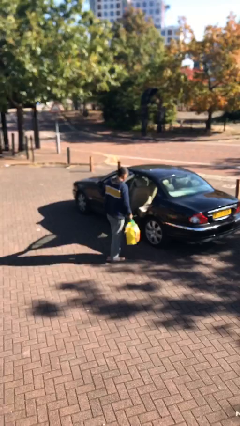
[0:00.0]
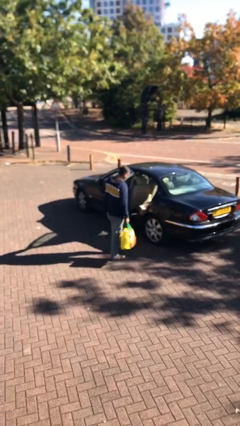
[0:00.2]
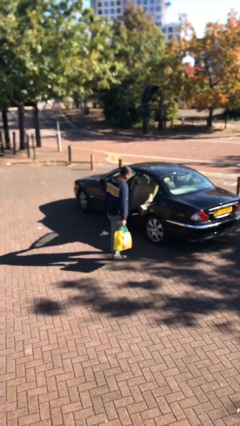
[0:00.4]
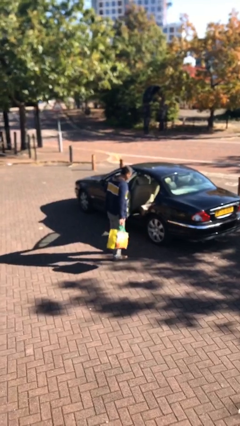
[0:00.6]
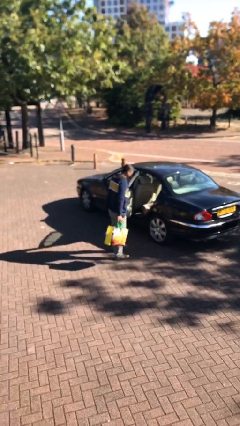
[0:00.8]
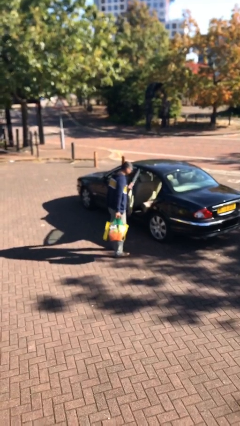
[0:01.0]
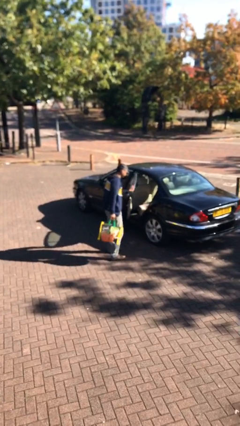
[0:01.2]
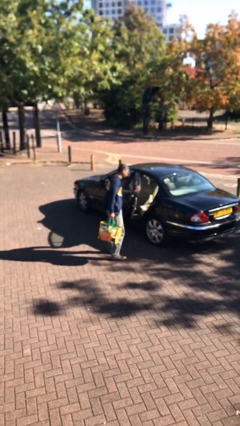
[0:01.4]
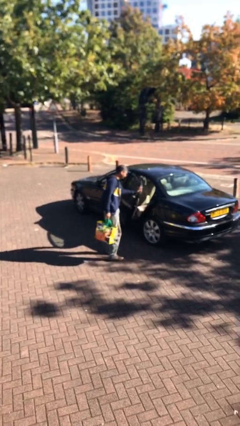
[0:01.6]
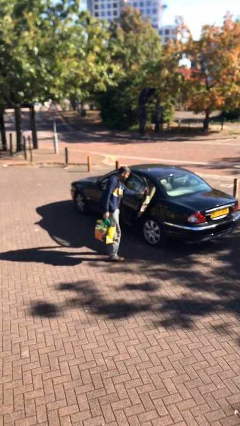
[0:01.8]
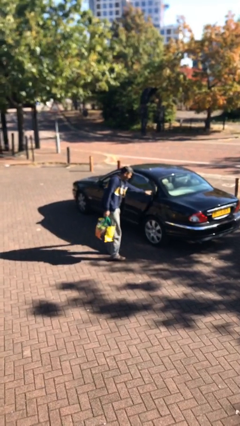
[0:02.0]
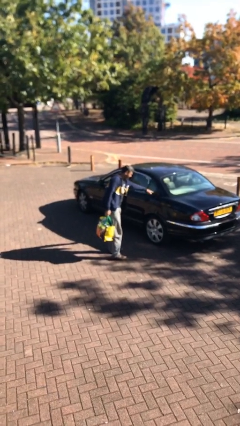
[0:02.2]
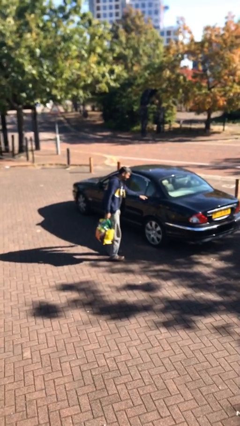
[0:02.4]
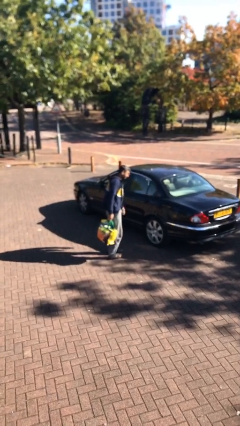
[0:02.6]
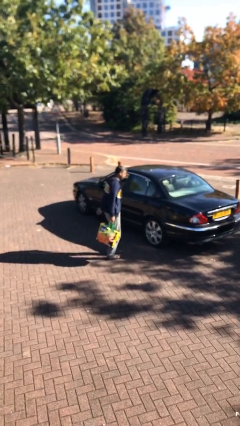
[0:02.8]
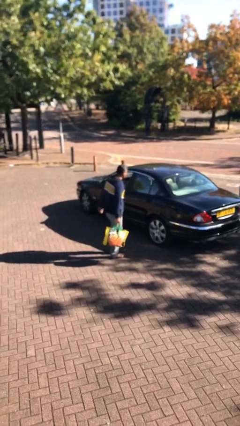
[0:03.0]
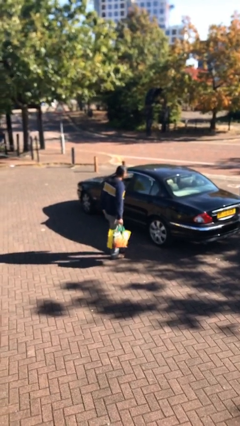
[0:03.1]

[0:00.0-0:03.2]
person closes car door

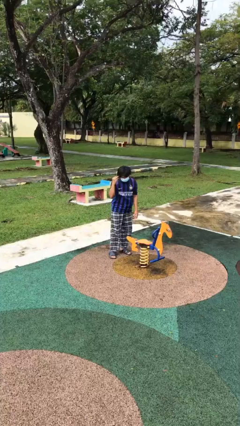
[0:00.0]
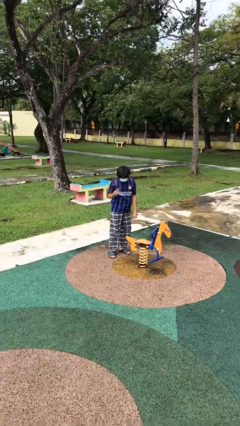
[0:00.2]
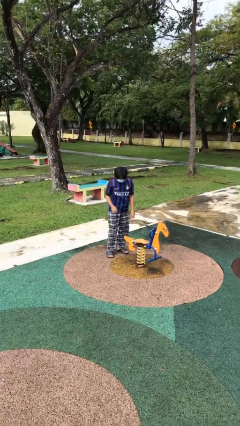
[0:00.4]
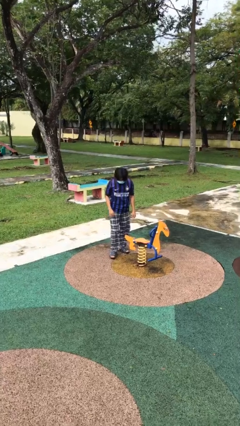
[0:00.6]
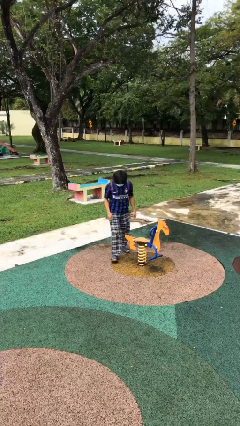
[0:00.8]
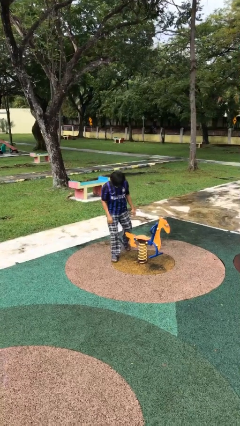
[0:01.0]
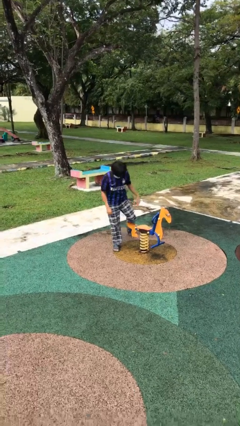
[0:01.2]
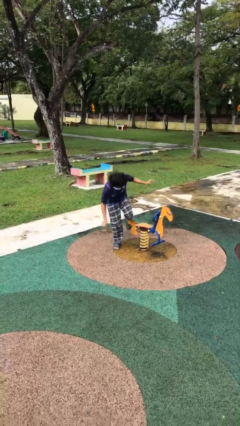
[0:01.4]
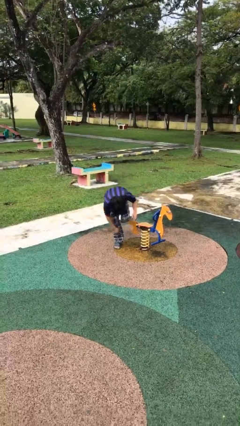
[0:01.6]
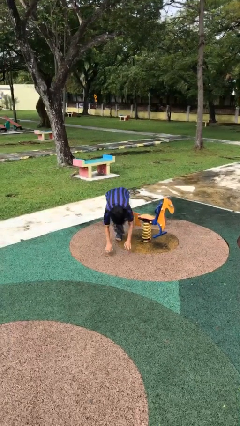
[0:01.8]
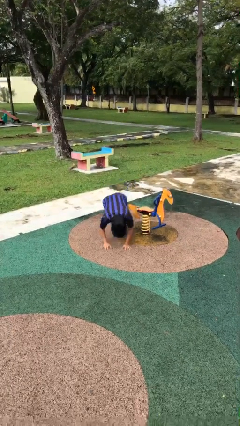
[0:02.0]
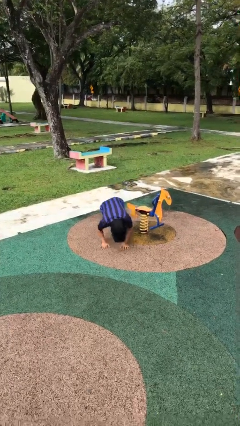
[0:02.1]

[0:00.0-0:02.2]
person trips on object on floor

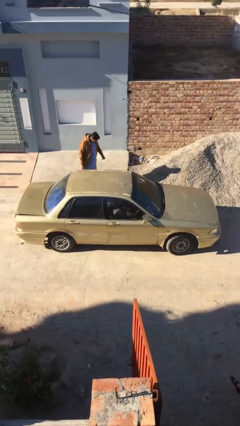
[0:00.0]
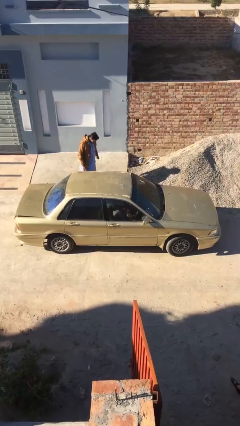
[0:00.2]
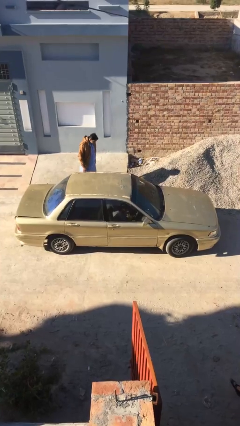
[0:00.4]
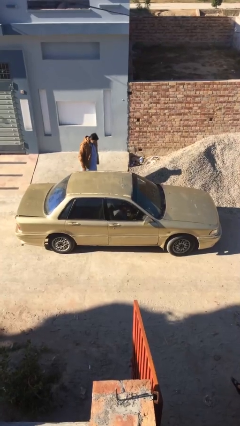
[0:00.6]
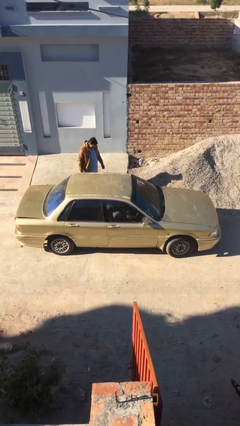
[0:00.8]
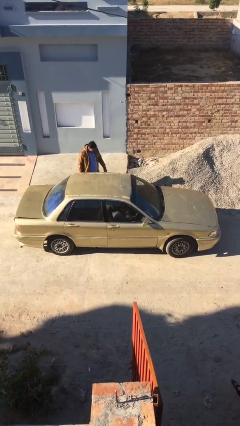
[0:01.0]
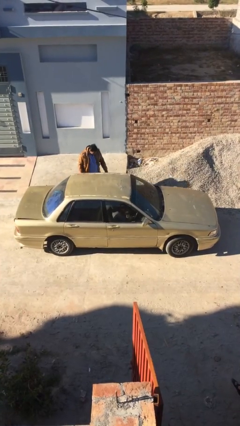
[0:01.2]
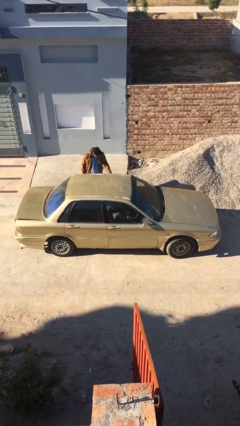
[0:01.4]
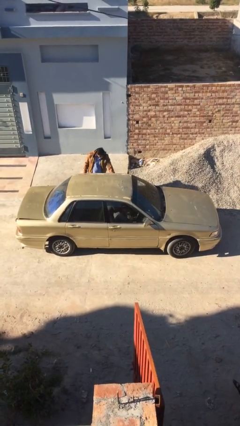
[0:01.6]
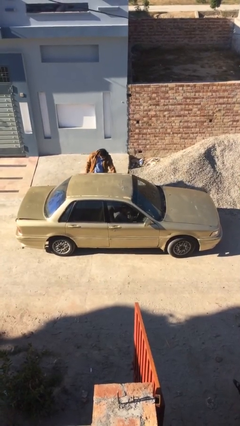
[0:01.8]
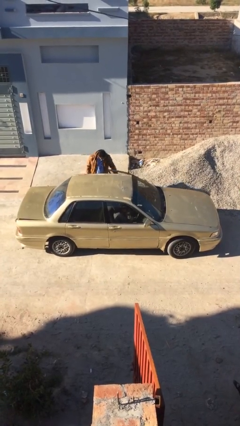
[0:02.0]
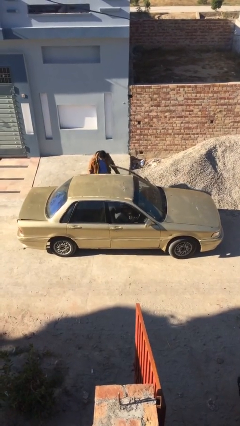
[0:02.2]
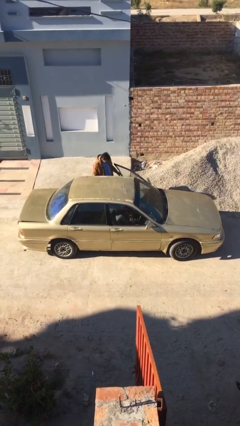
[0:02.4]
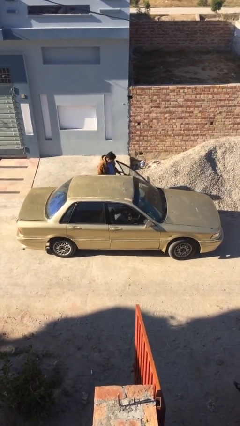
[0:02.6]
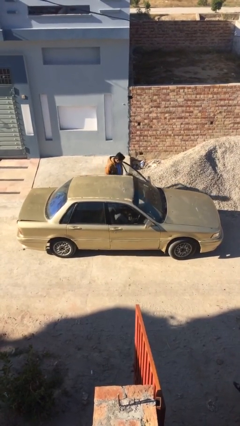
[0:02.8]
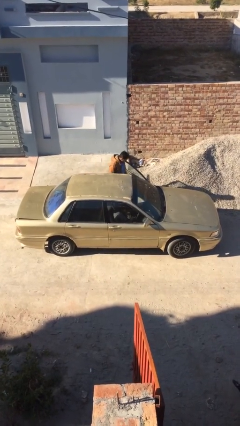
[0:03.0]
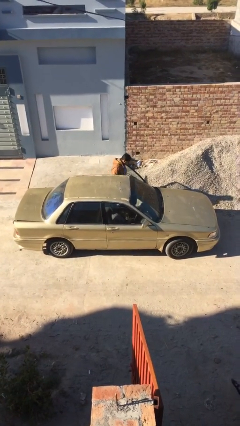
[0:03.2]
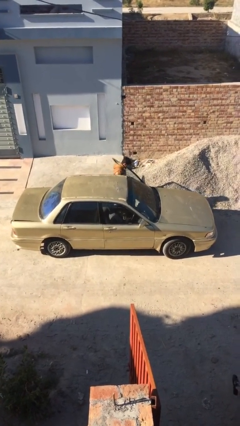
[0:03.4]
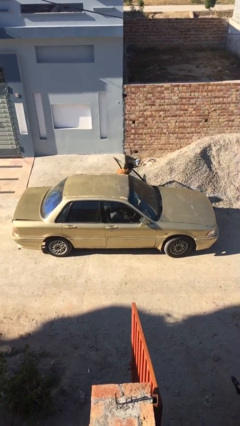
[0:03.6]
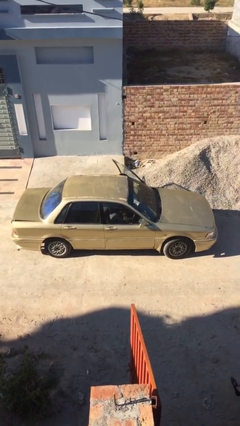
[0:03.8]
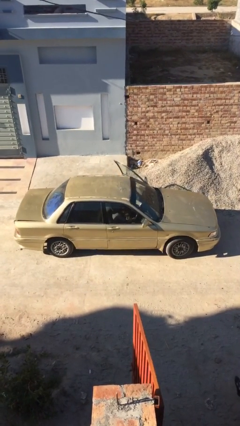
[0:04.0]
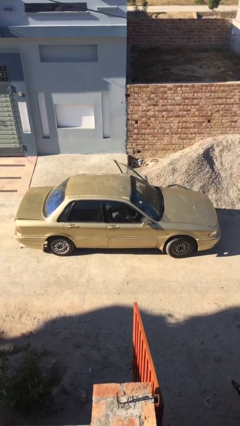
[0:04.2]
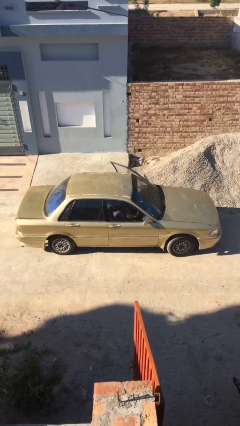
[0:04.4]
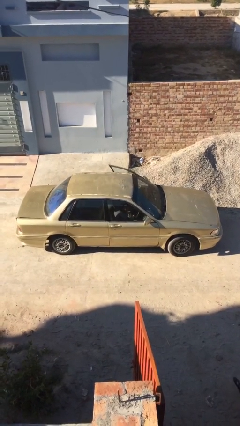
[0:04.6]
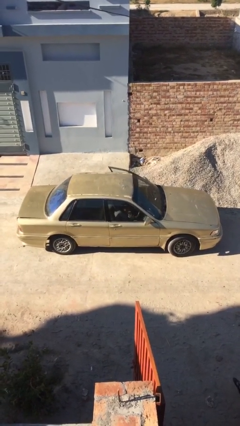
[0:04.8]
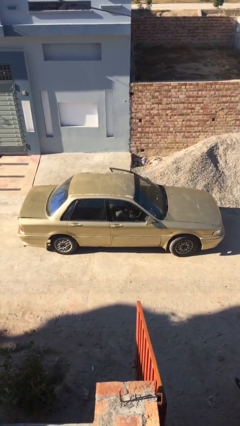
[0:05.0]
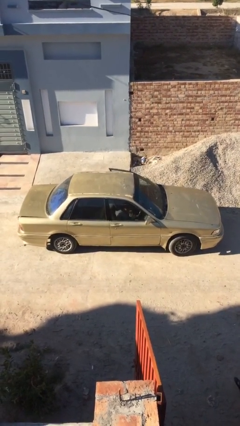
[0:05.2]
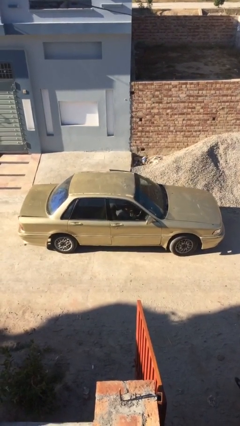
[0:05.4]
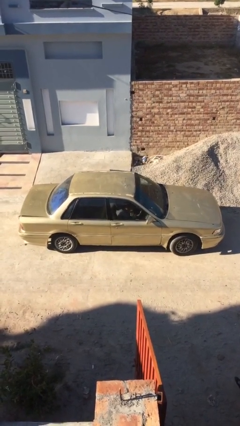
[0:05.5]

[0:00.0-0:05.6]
car picks up person

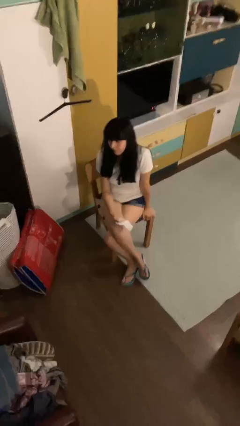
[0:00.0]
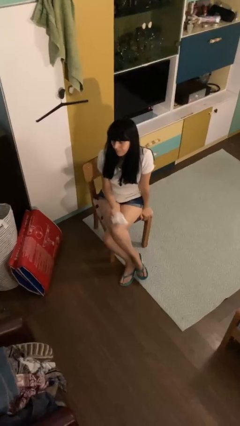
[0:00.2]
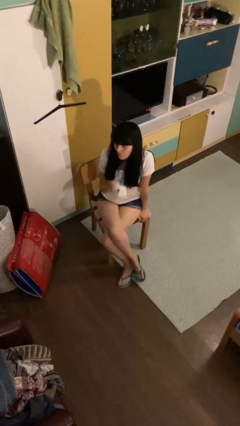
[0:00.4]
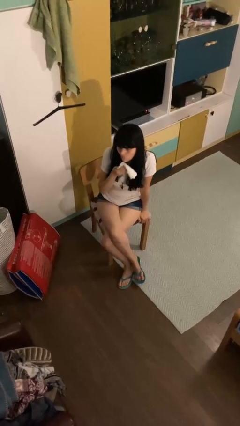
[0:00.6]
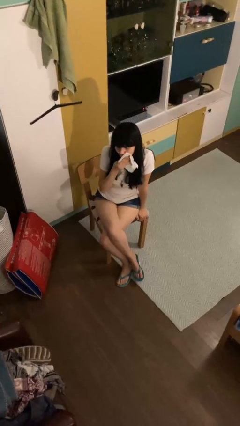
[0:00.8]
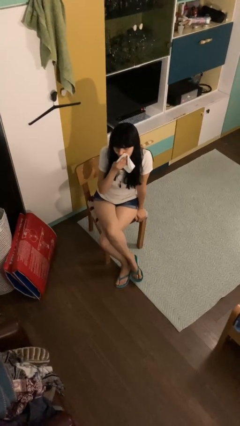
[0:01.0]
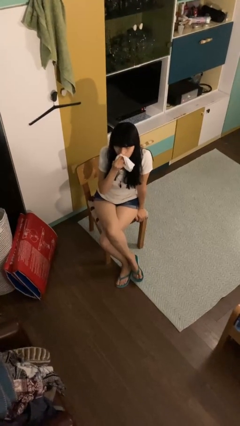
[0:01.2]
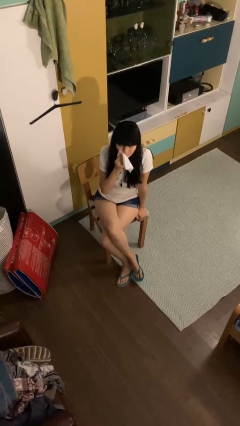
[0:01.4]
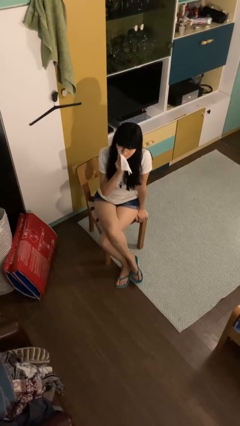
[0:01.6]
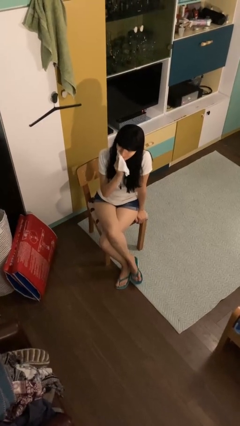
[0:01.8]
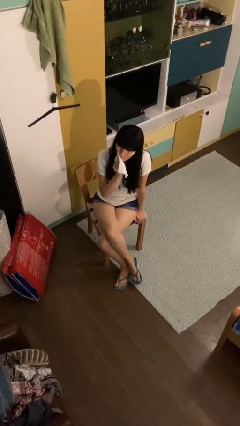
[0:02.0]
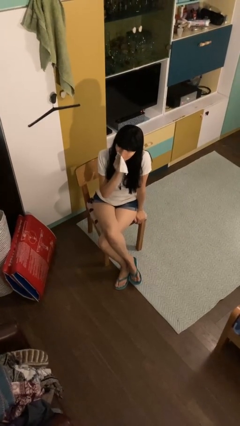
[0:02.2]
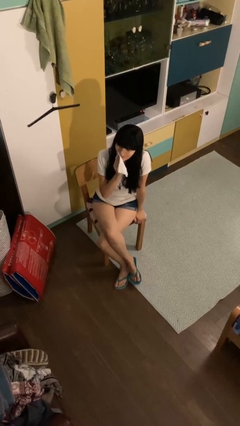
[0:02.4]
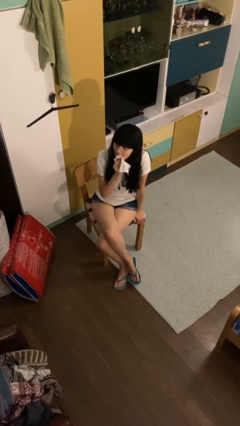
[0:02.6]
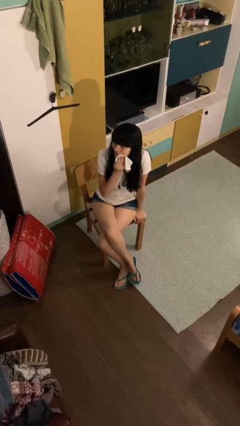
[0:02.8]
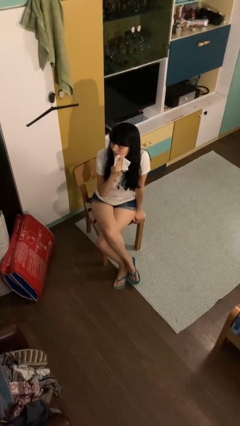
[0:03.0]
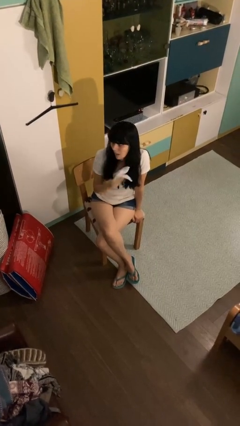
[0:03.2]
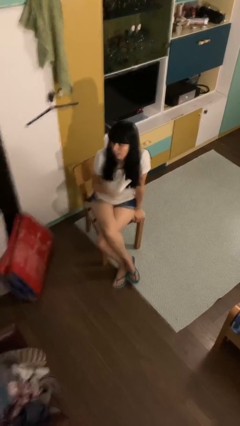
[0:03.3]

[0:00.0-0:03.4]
person wipes mouth with napkin

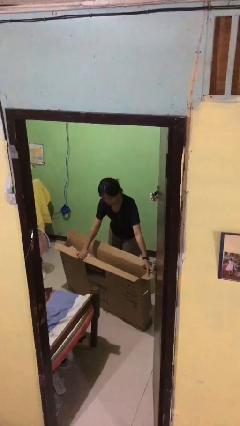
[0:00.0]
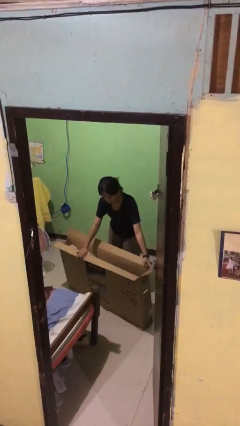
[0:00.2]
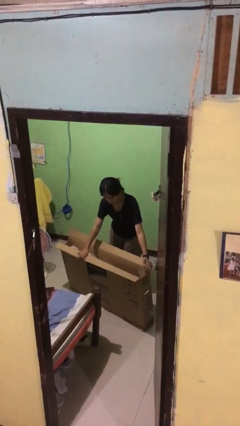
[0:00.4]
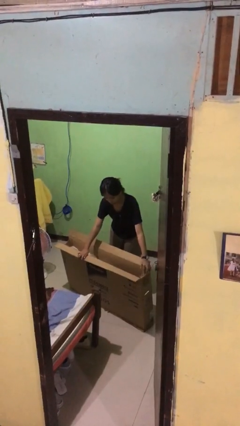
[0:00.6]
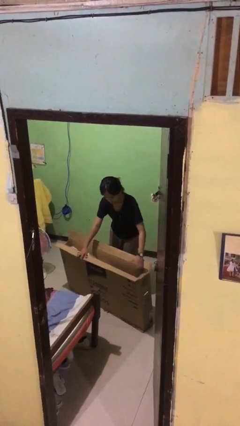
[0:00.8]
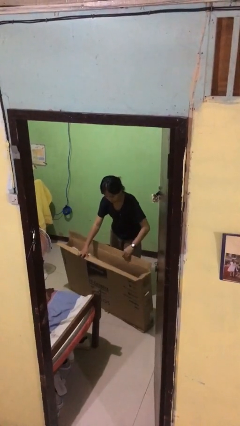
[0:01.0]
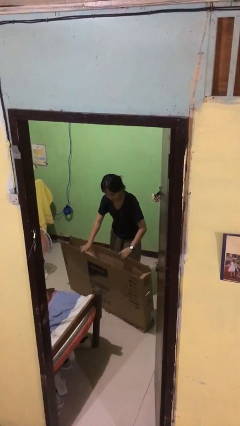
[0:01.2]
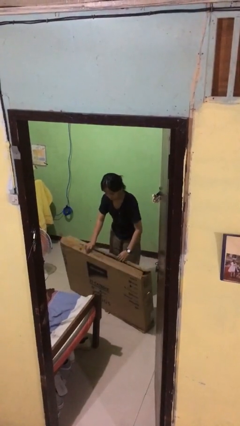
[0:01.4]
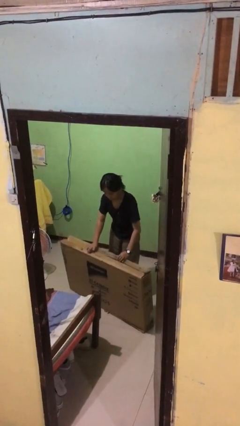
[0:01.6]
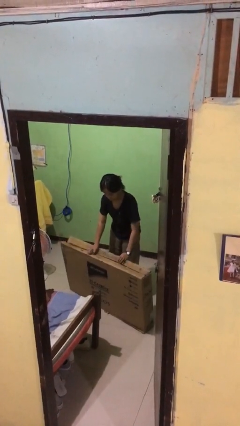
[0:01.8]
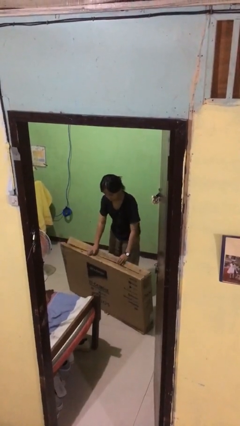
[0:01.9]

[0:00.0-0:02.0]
person closes box

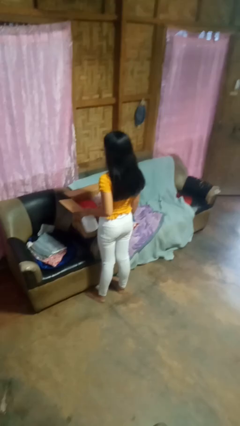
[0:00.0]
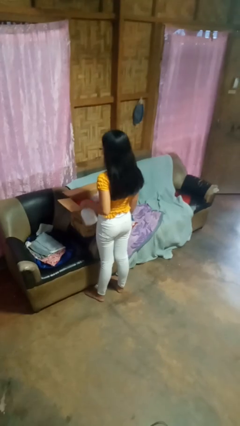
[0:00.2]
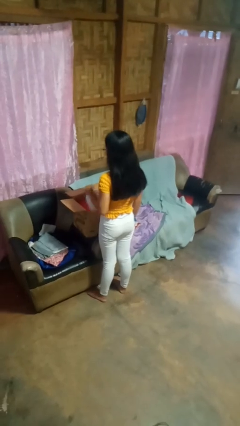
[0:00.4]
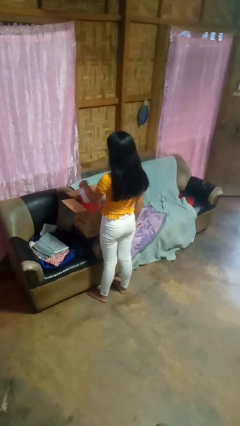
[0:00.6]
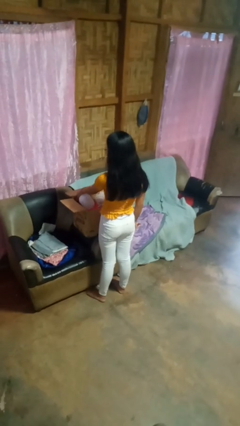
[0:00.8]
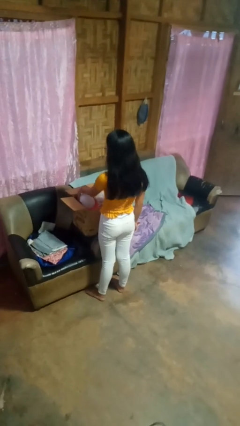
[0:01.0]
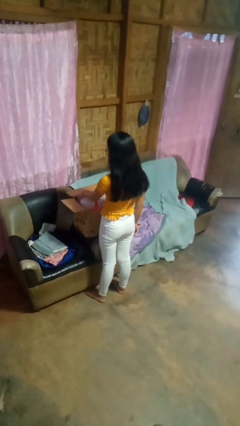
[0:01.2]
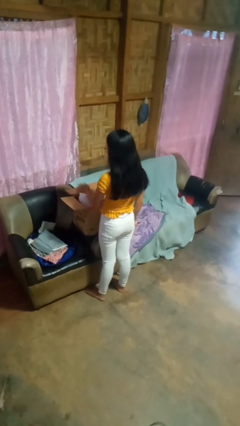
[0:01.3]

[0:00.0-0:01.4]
person puts object into box
